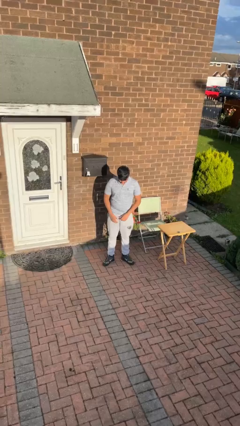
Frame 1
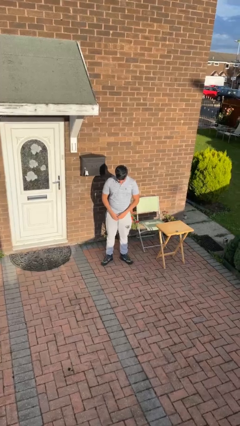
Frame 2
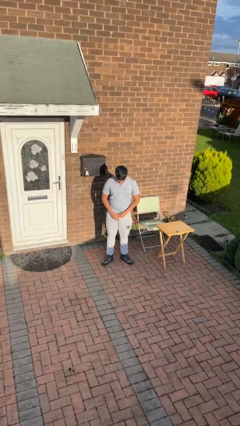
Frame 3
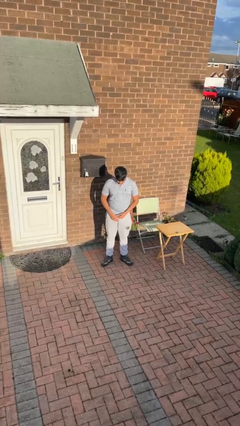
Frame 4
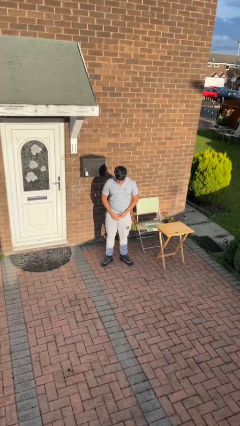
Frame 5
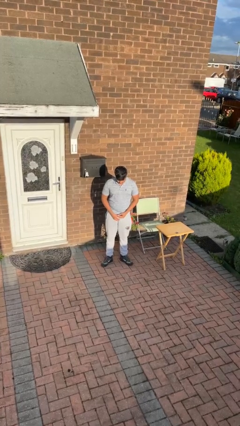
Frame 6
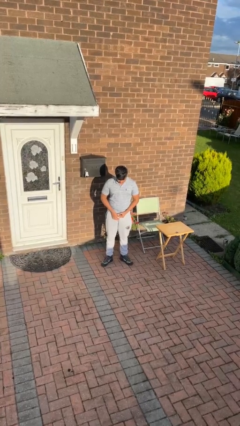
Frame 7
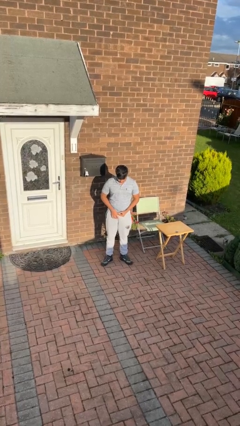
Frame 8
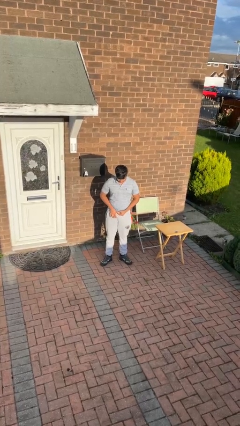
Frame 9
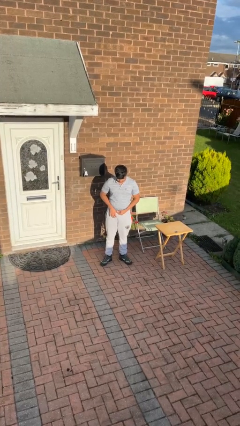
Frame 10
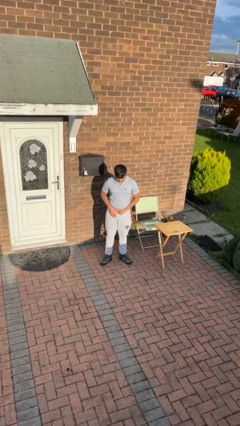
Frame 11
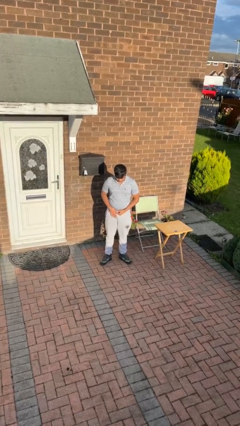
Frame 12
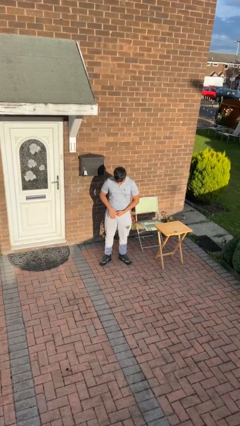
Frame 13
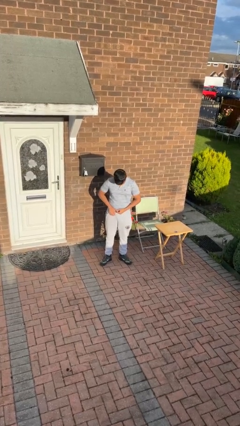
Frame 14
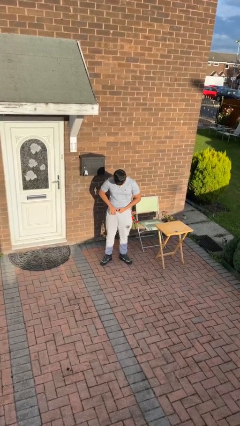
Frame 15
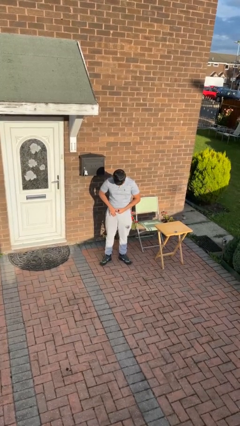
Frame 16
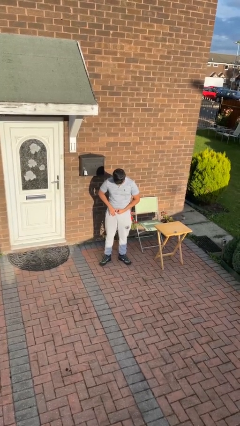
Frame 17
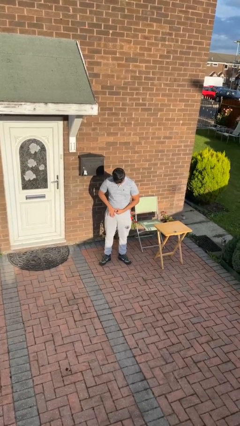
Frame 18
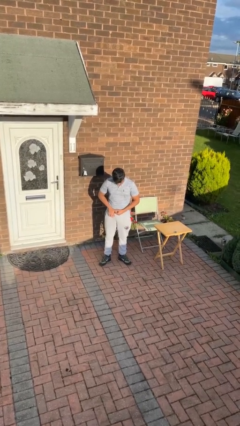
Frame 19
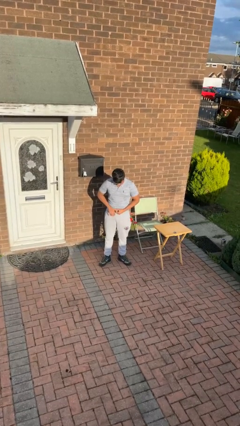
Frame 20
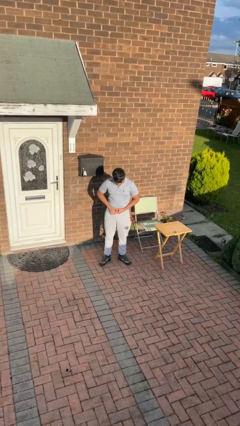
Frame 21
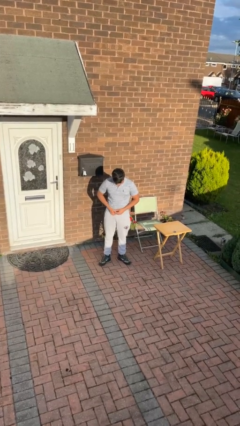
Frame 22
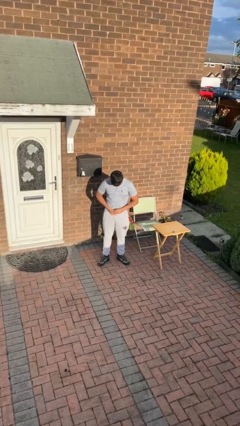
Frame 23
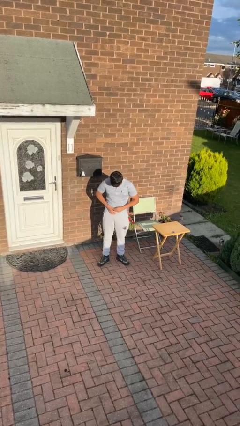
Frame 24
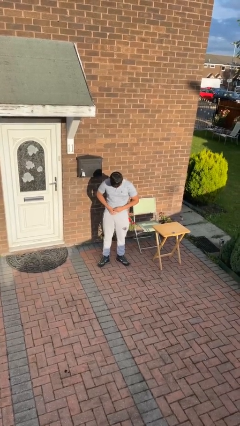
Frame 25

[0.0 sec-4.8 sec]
person takes off ring

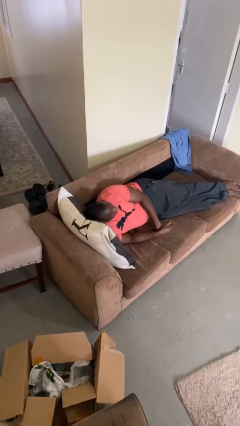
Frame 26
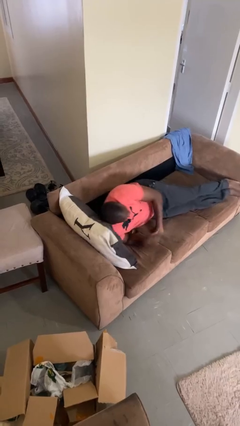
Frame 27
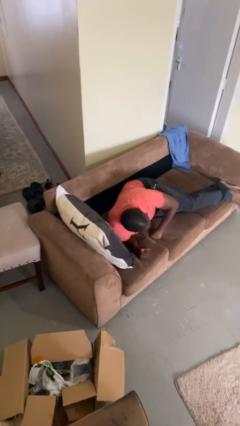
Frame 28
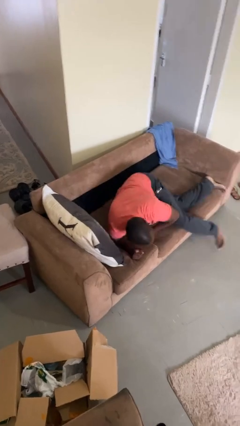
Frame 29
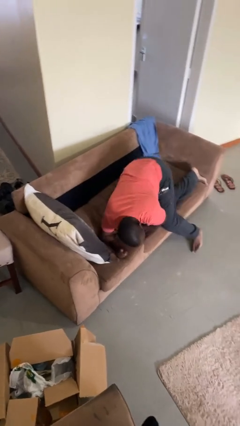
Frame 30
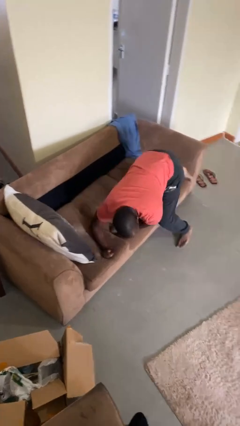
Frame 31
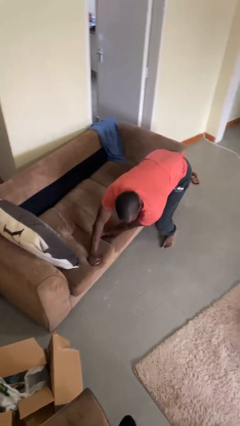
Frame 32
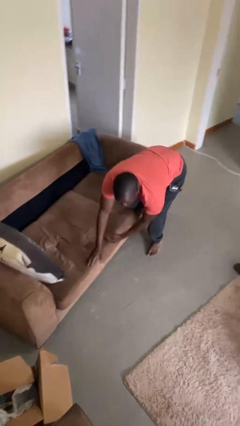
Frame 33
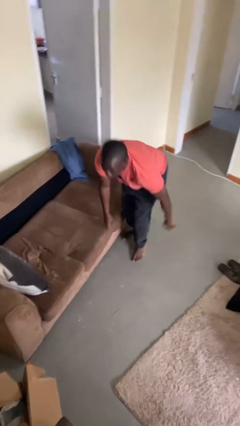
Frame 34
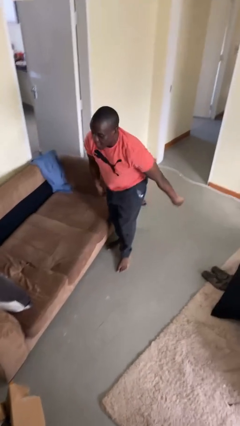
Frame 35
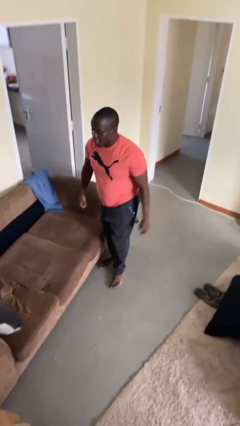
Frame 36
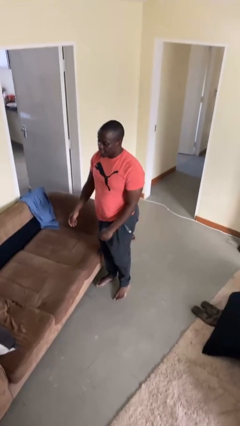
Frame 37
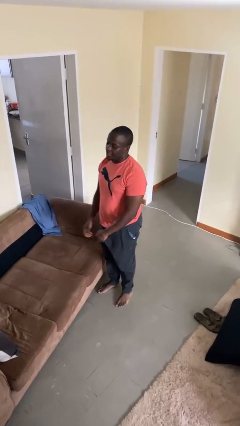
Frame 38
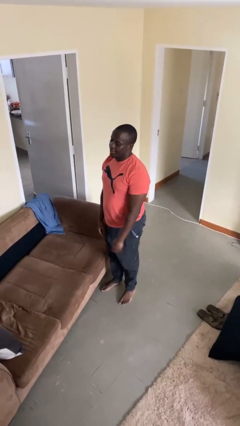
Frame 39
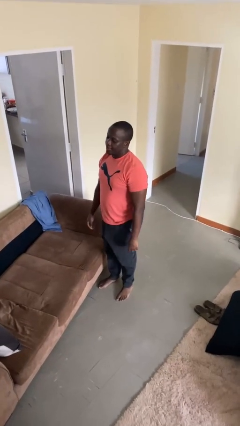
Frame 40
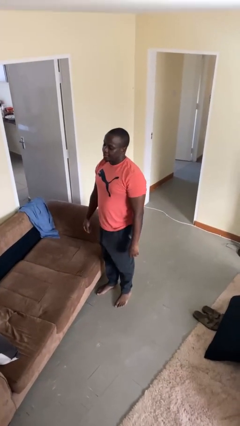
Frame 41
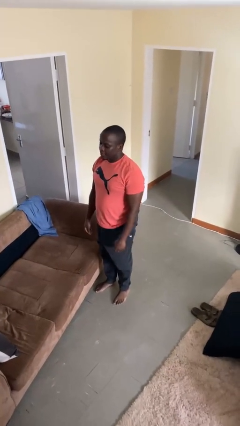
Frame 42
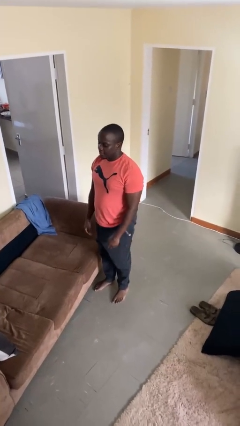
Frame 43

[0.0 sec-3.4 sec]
person stands up

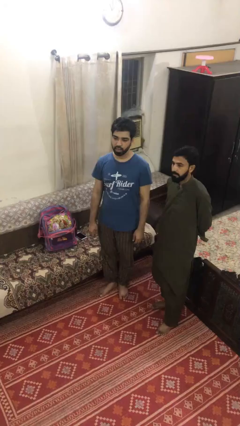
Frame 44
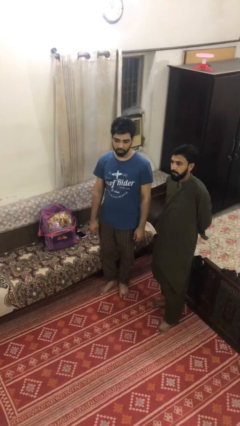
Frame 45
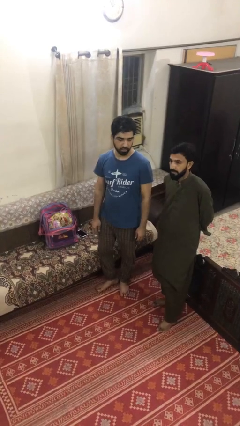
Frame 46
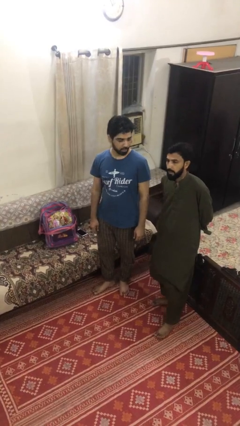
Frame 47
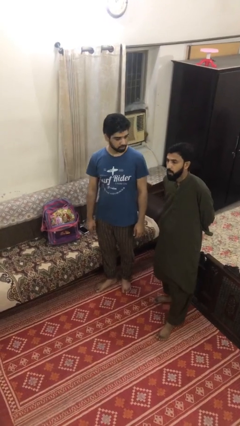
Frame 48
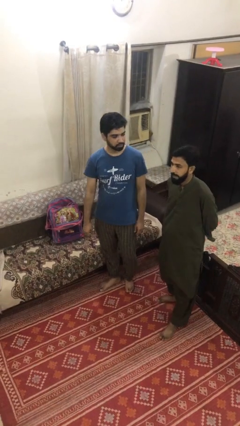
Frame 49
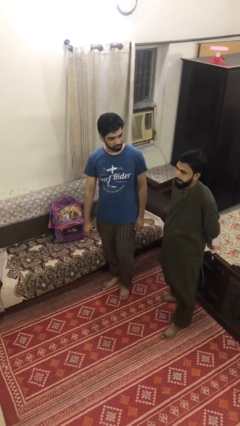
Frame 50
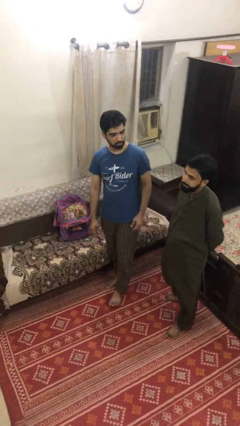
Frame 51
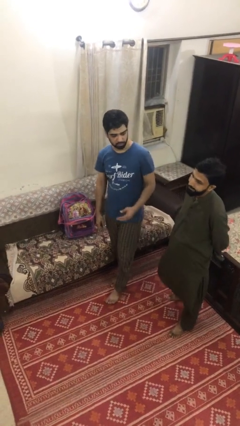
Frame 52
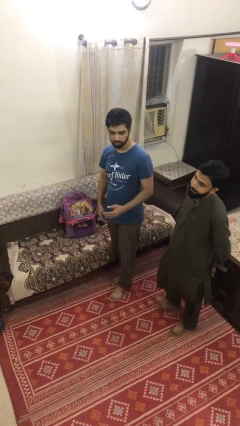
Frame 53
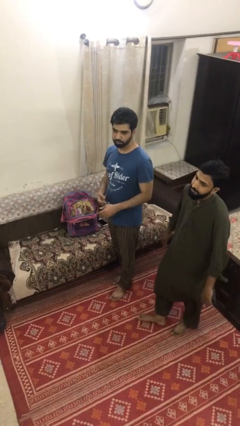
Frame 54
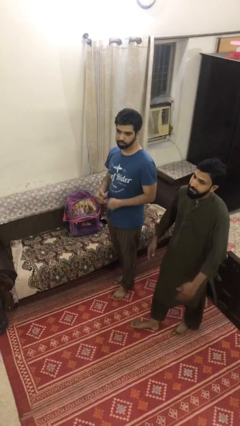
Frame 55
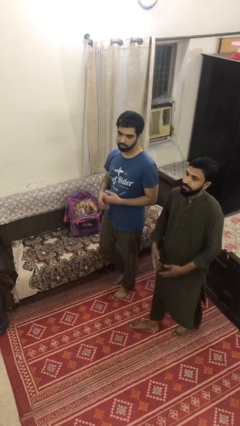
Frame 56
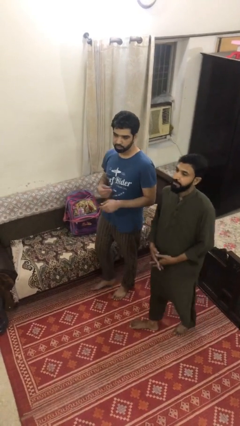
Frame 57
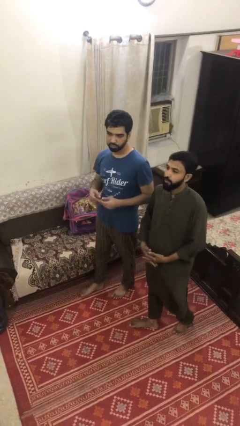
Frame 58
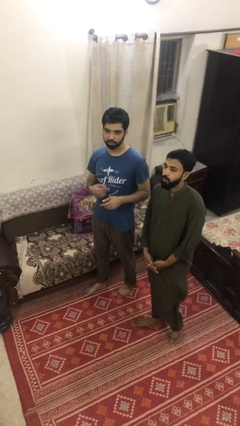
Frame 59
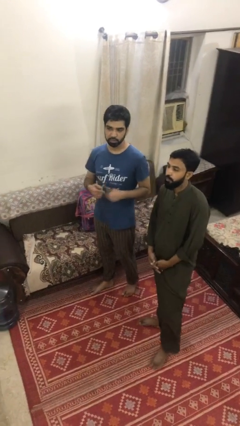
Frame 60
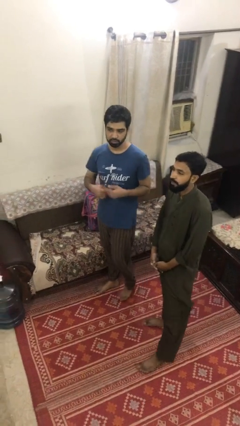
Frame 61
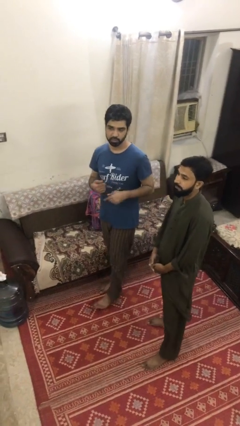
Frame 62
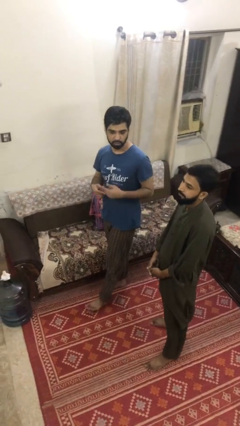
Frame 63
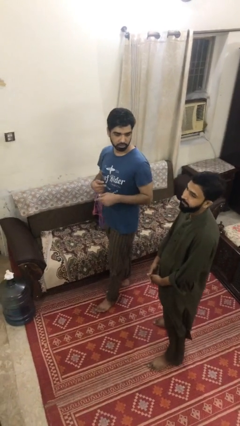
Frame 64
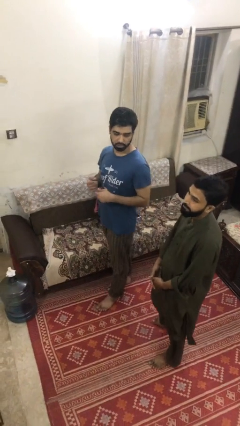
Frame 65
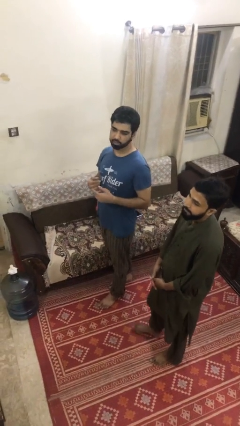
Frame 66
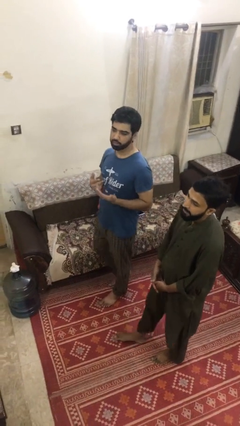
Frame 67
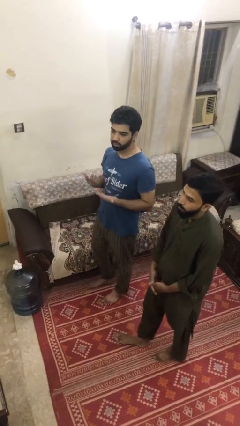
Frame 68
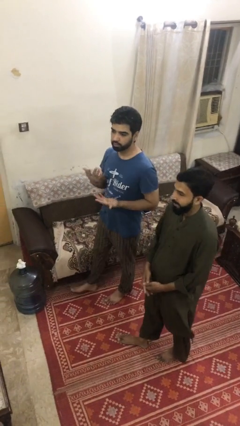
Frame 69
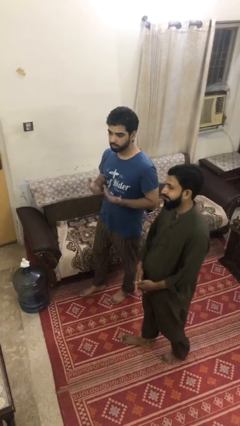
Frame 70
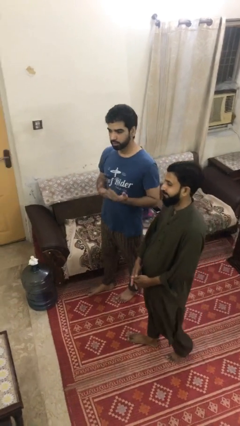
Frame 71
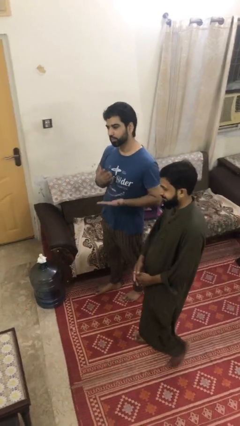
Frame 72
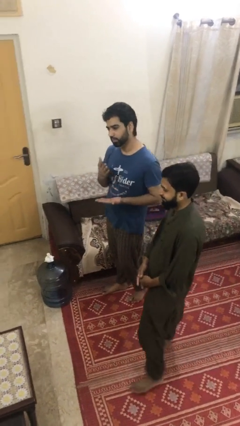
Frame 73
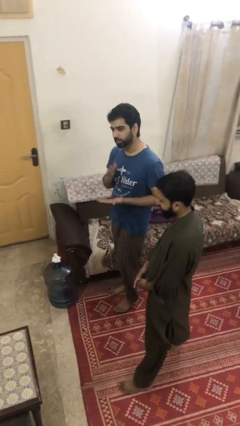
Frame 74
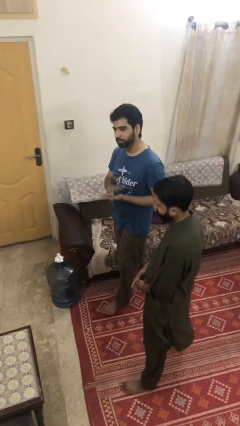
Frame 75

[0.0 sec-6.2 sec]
person talks to person

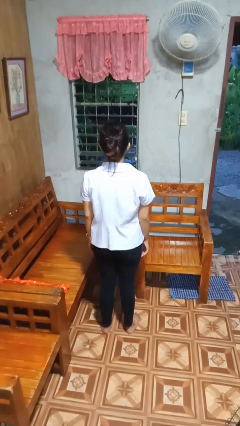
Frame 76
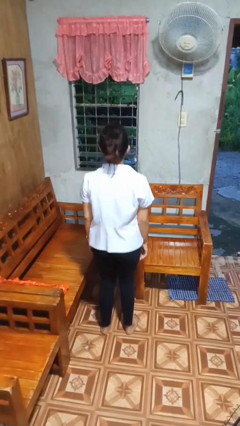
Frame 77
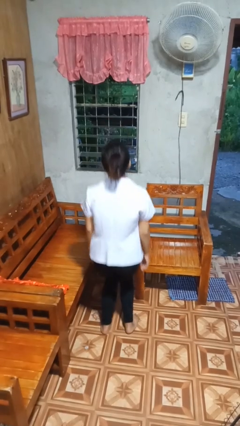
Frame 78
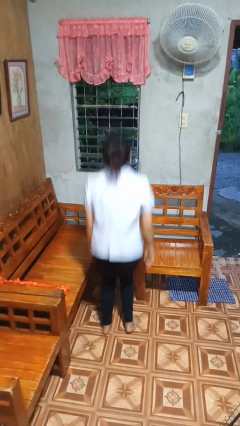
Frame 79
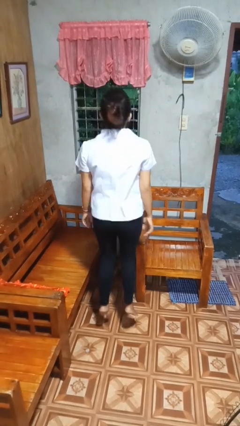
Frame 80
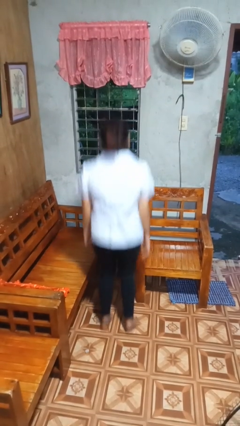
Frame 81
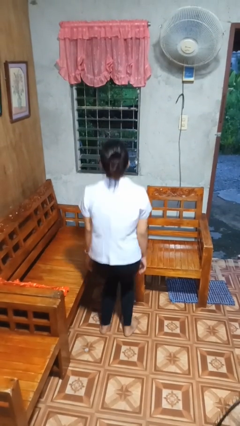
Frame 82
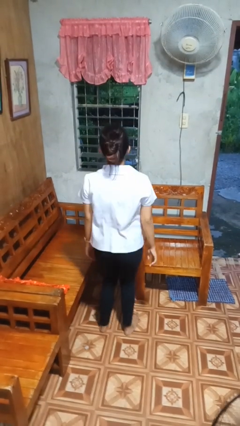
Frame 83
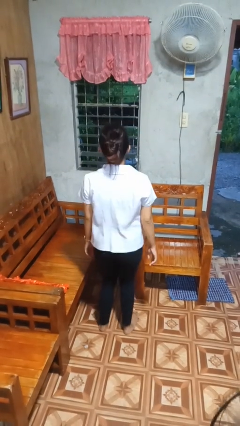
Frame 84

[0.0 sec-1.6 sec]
person jumps

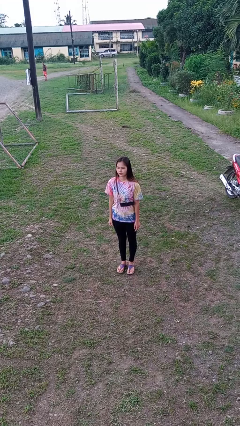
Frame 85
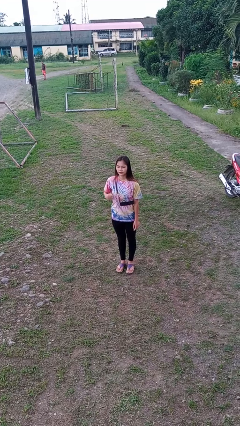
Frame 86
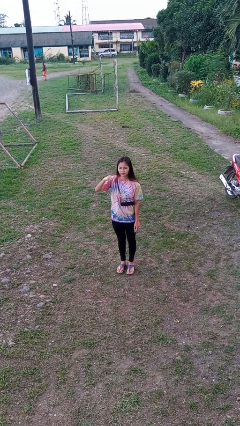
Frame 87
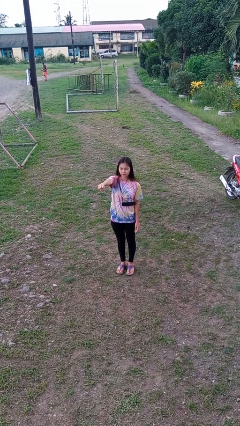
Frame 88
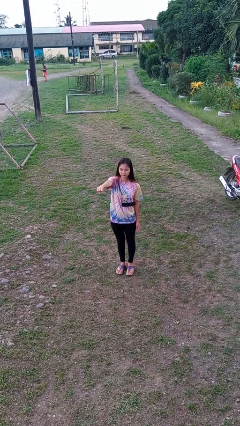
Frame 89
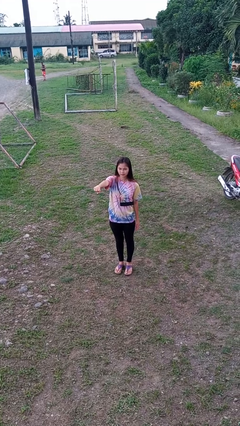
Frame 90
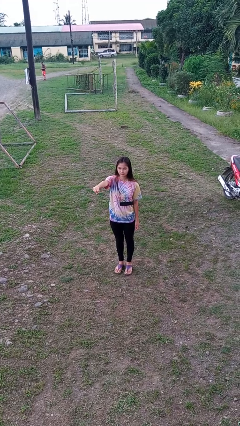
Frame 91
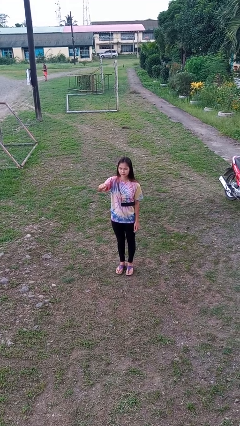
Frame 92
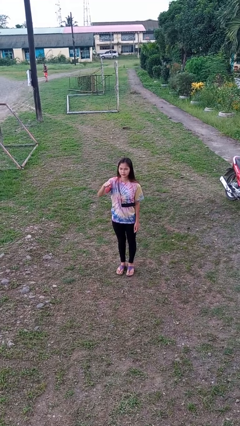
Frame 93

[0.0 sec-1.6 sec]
person punches
